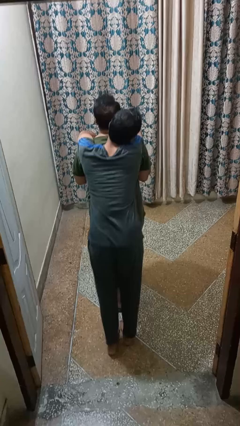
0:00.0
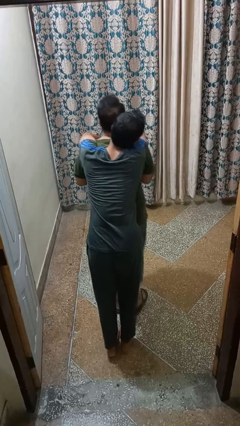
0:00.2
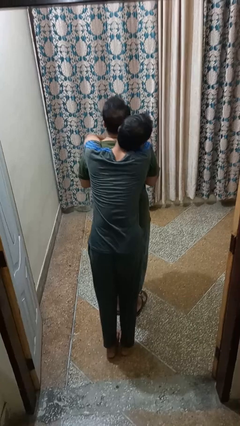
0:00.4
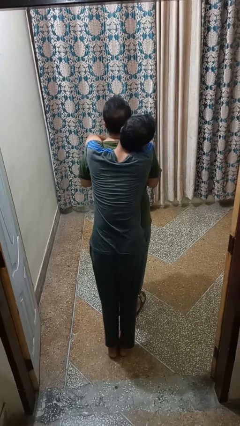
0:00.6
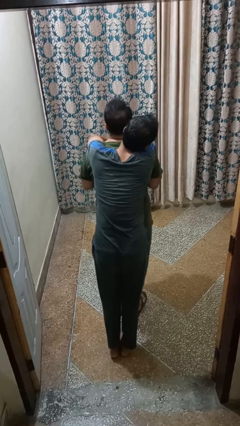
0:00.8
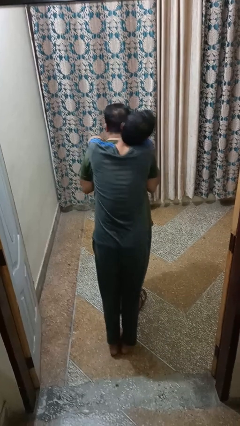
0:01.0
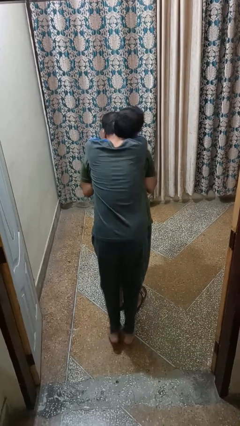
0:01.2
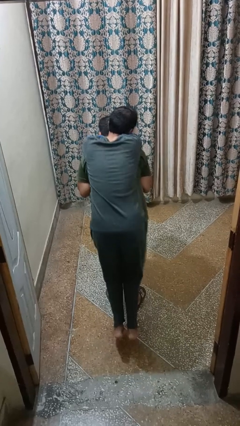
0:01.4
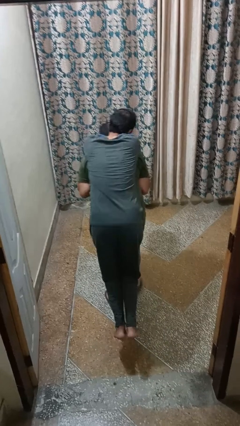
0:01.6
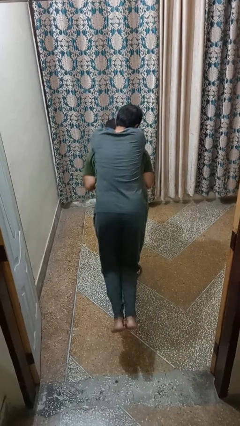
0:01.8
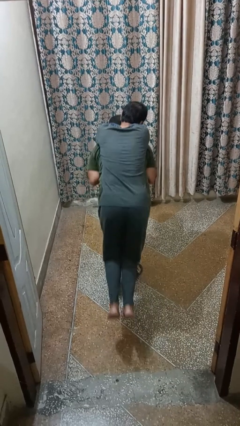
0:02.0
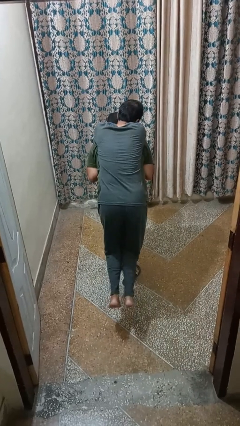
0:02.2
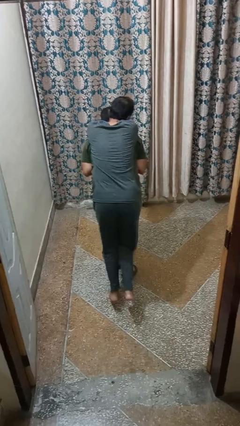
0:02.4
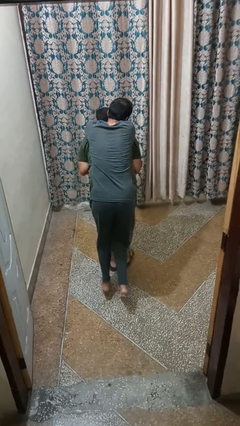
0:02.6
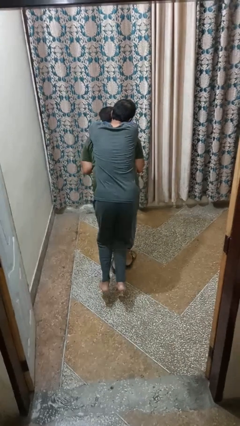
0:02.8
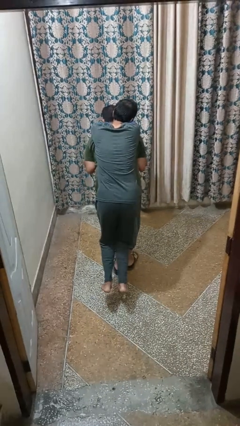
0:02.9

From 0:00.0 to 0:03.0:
person carries person on back

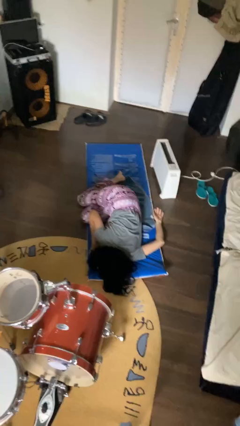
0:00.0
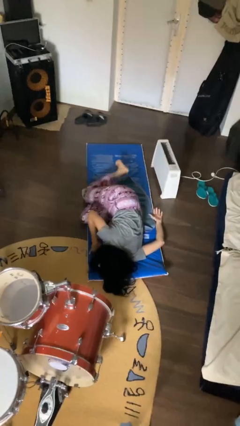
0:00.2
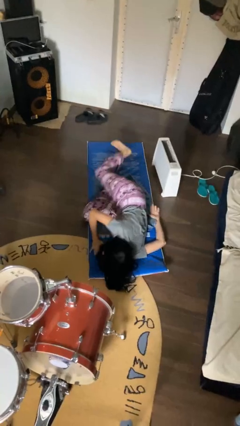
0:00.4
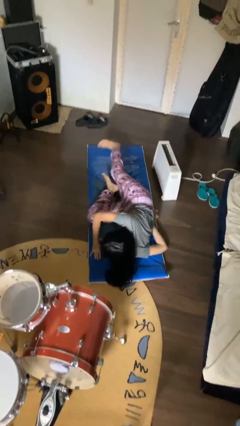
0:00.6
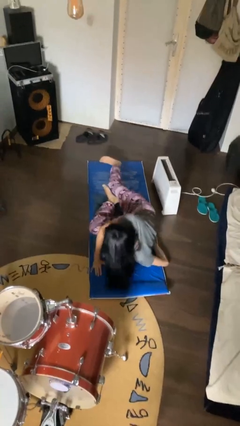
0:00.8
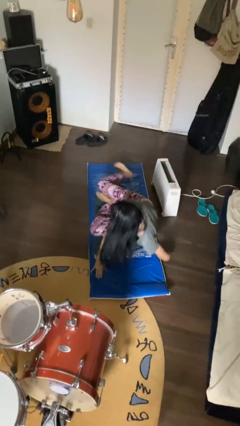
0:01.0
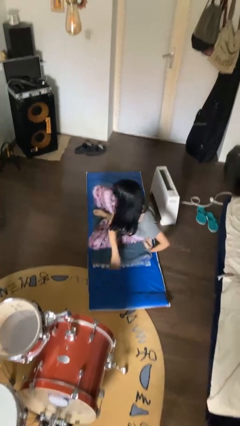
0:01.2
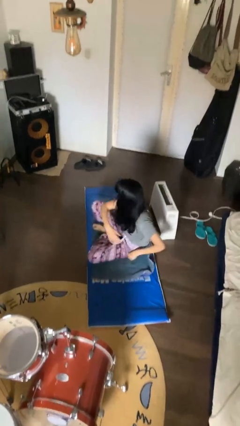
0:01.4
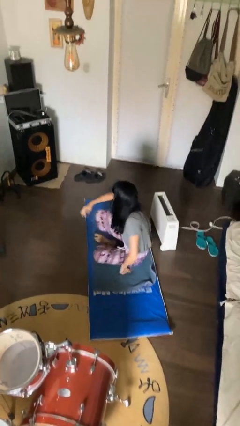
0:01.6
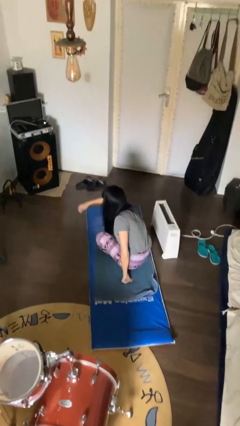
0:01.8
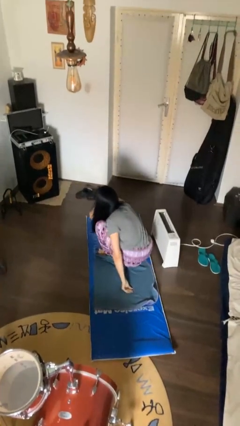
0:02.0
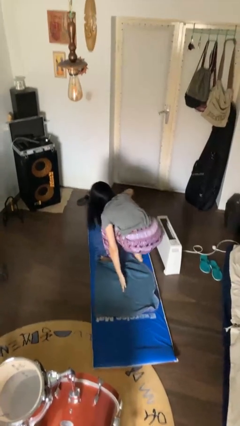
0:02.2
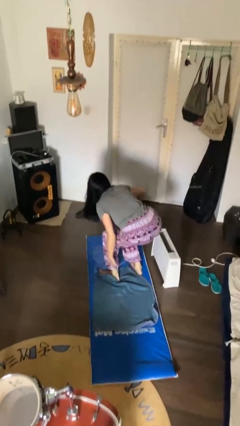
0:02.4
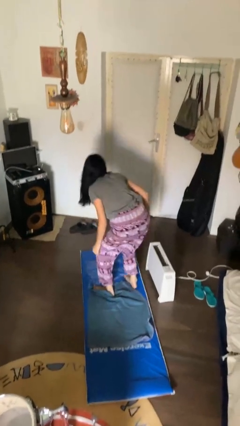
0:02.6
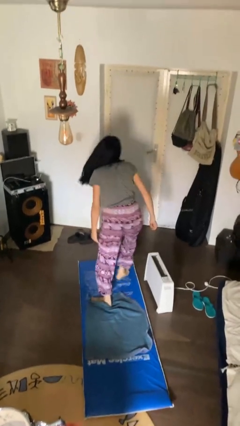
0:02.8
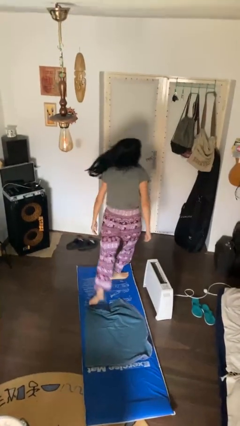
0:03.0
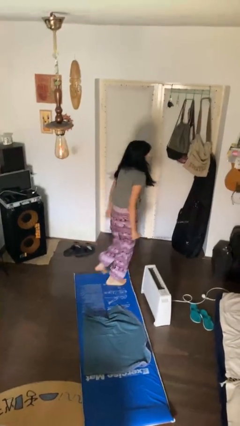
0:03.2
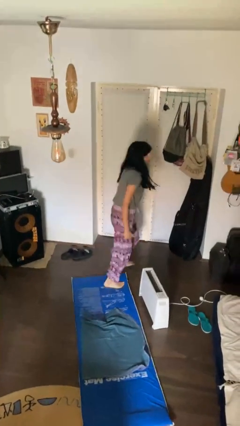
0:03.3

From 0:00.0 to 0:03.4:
person stands up from floor

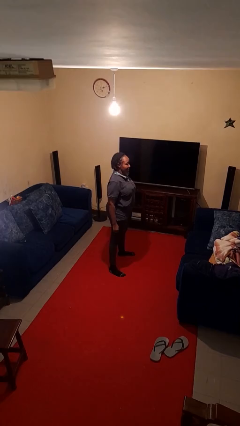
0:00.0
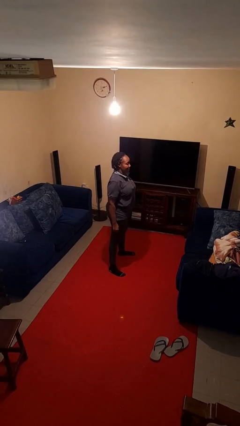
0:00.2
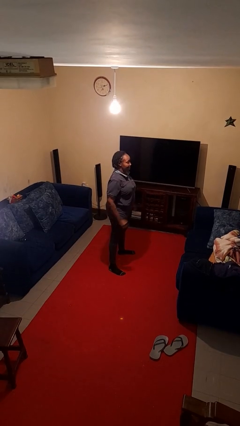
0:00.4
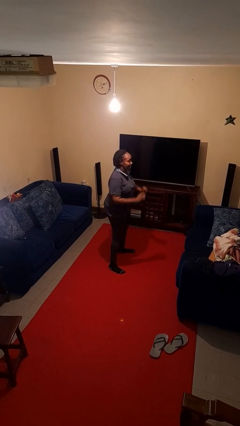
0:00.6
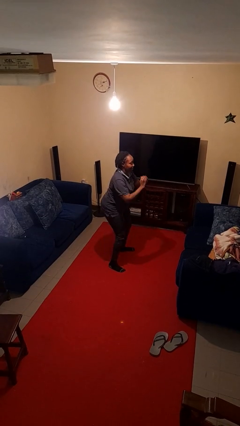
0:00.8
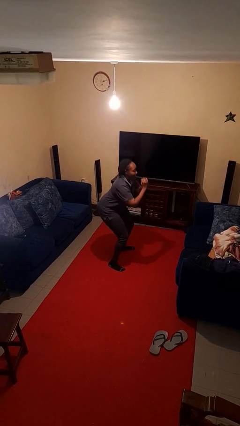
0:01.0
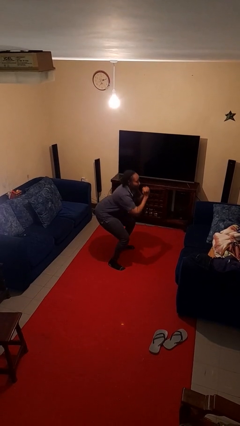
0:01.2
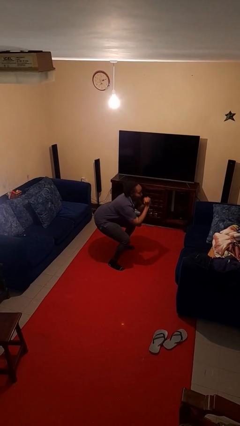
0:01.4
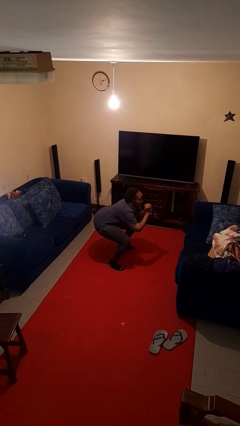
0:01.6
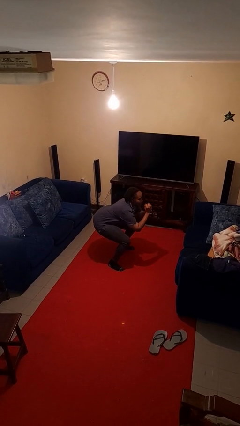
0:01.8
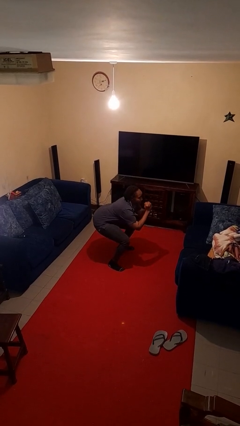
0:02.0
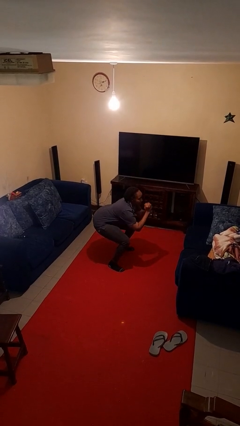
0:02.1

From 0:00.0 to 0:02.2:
person squats

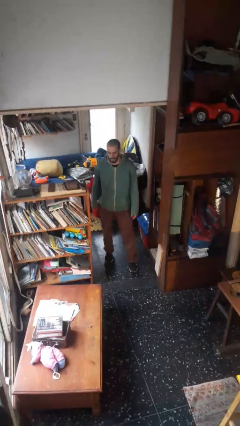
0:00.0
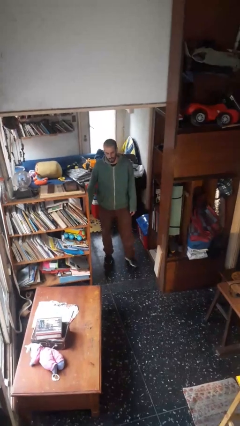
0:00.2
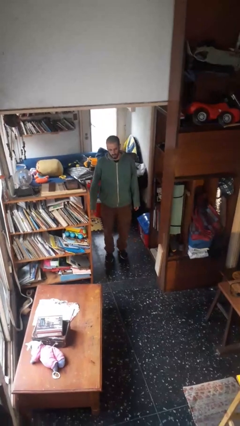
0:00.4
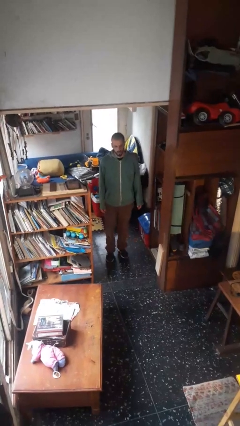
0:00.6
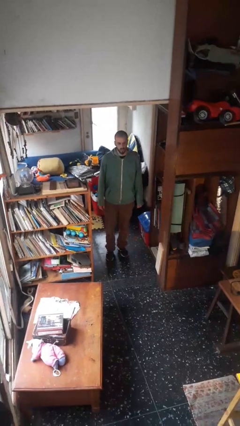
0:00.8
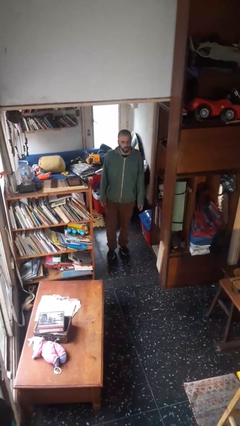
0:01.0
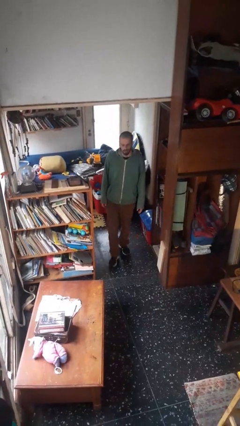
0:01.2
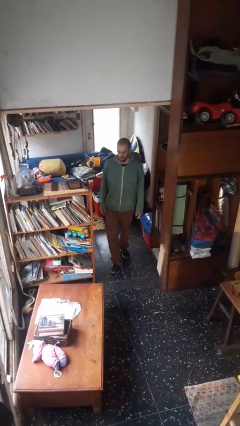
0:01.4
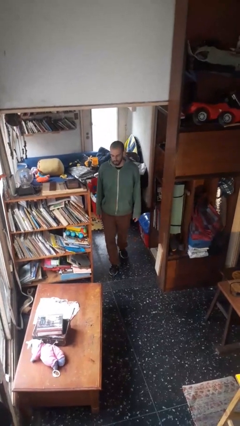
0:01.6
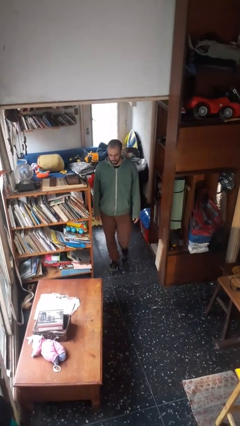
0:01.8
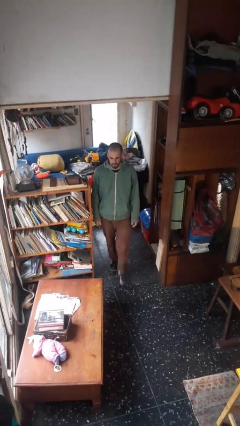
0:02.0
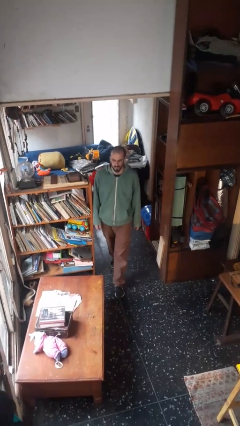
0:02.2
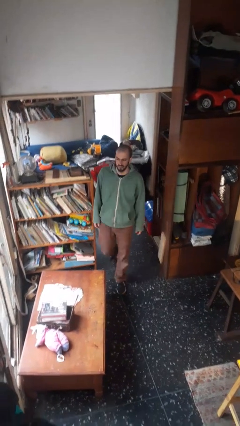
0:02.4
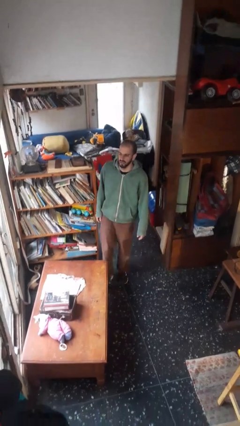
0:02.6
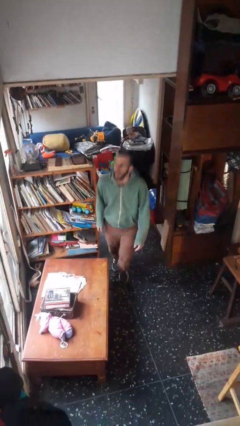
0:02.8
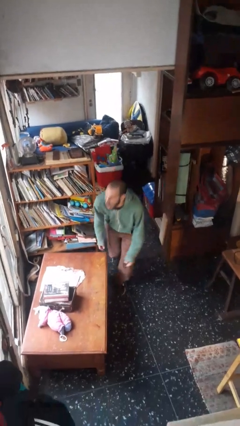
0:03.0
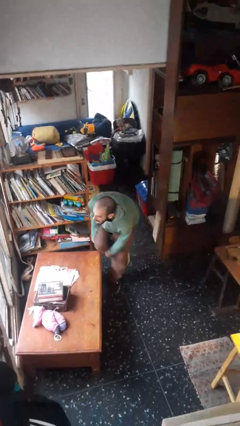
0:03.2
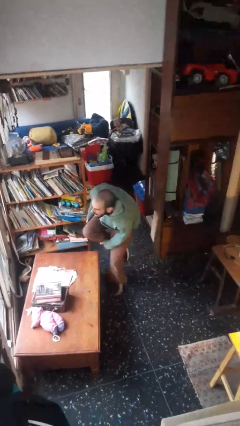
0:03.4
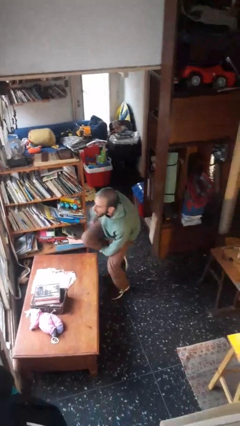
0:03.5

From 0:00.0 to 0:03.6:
person bumps into table

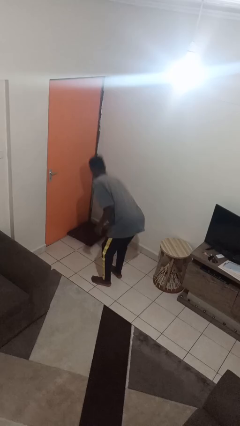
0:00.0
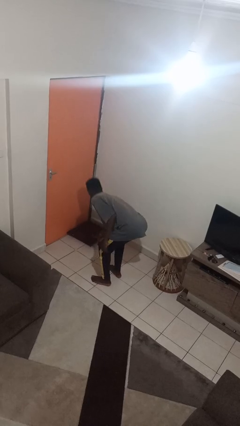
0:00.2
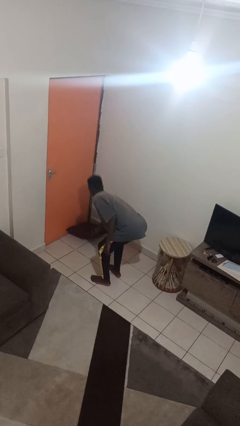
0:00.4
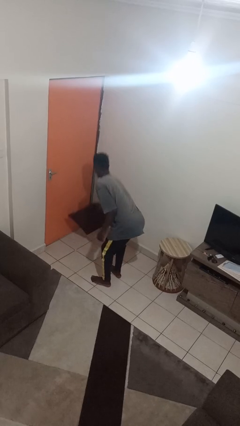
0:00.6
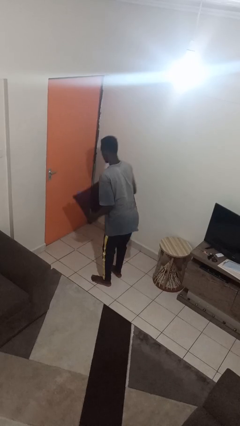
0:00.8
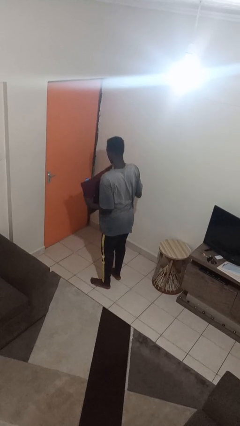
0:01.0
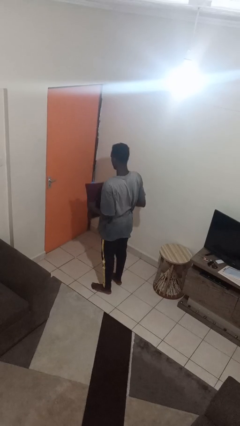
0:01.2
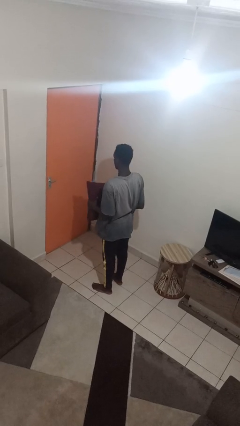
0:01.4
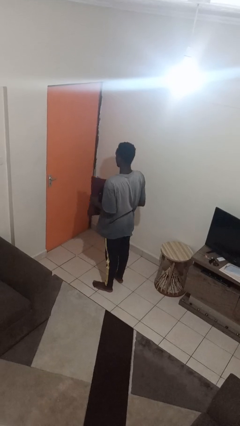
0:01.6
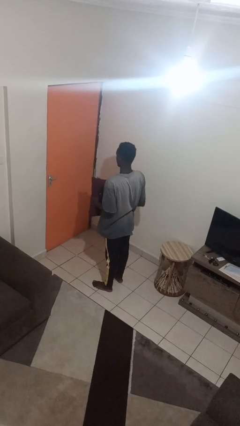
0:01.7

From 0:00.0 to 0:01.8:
person picks up object from floor

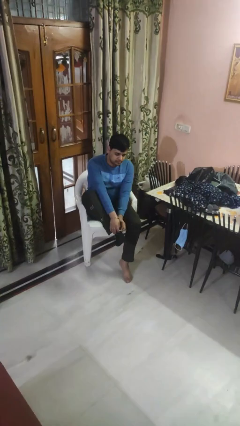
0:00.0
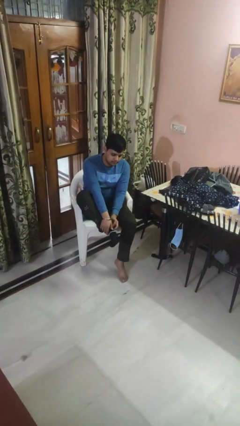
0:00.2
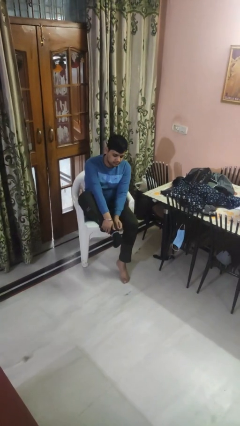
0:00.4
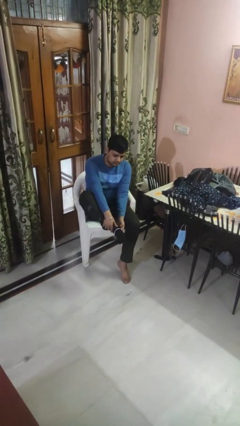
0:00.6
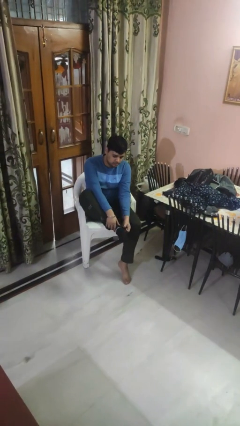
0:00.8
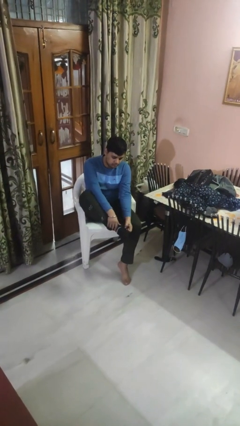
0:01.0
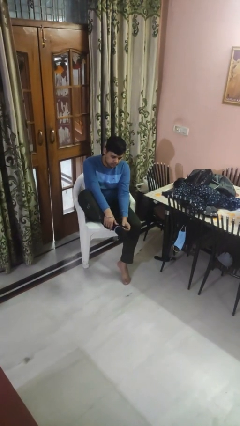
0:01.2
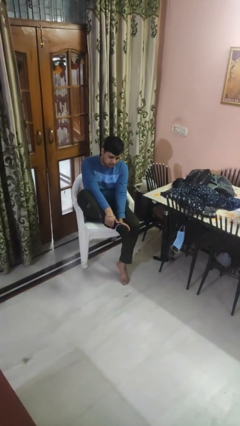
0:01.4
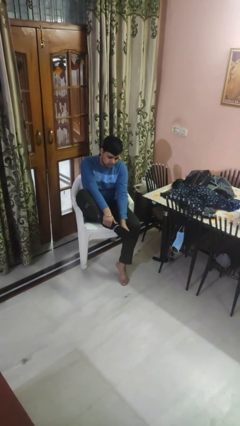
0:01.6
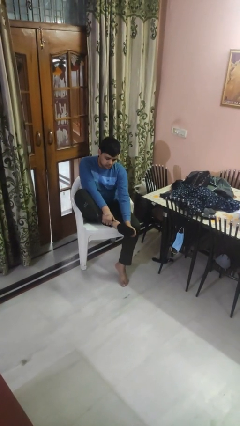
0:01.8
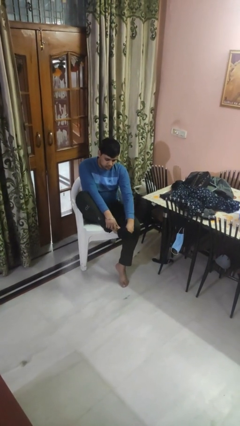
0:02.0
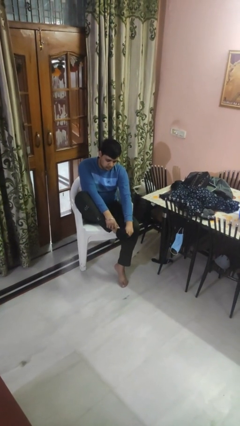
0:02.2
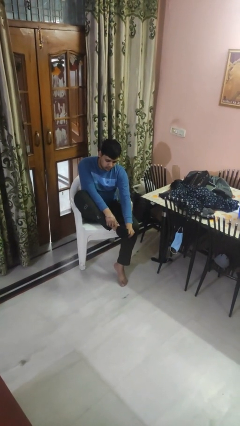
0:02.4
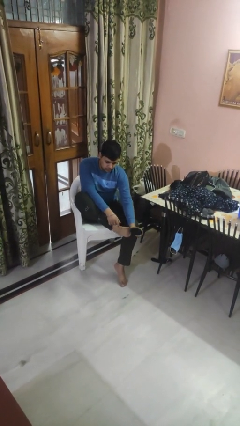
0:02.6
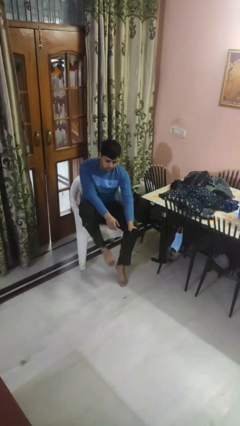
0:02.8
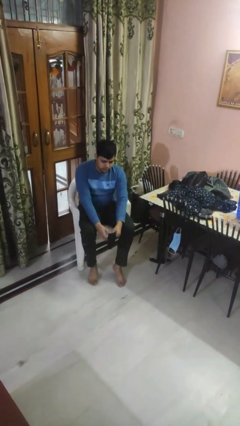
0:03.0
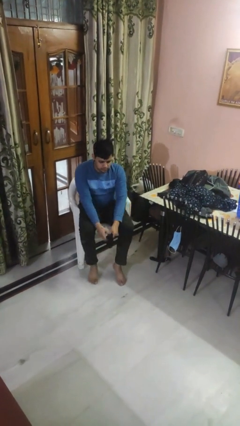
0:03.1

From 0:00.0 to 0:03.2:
person takes off socks

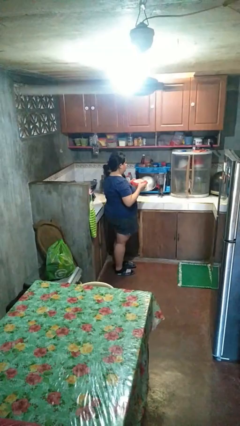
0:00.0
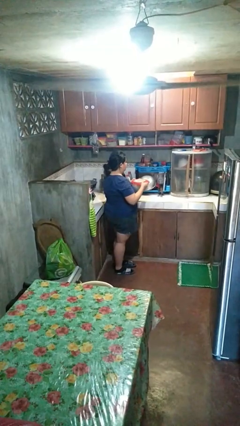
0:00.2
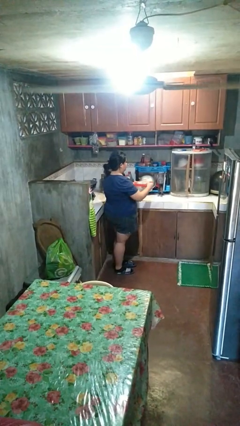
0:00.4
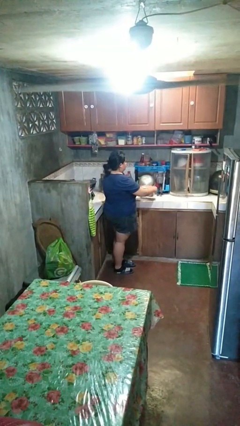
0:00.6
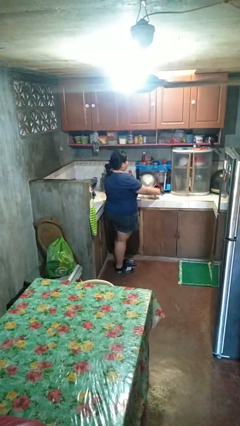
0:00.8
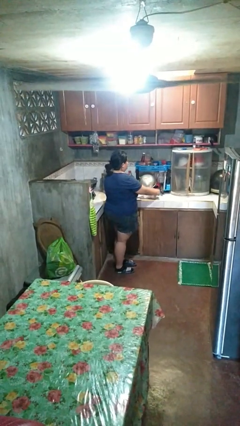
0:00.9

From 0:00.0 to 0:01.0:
person puts down object on countertop
